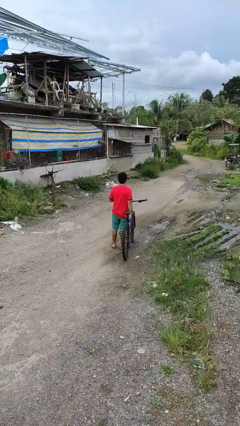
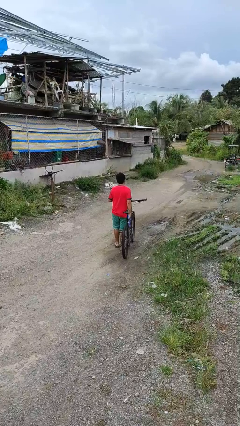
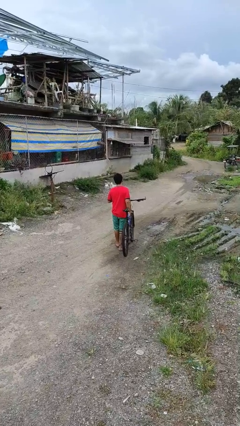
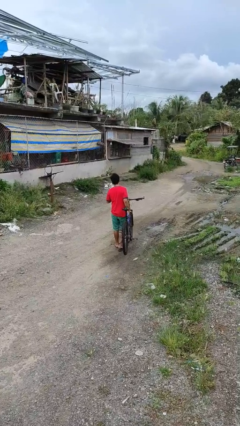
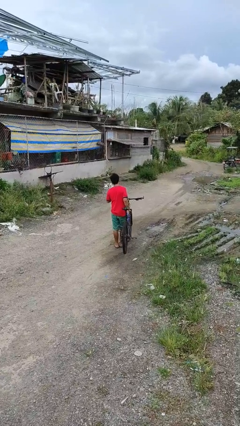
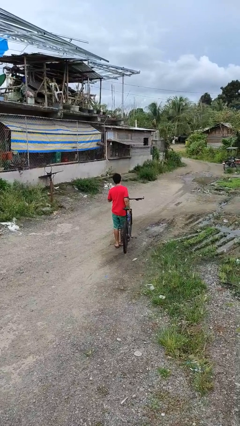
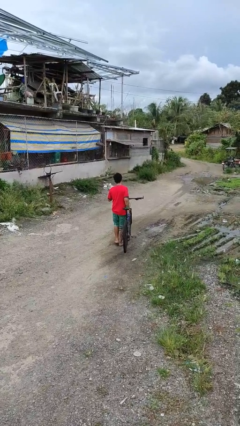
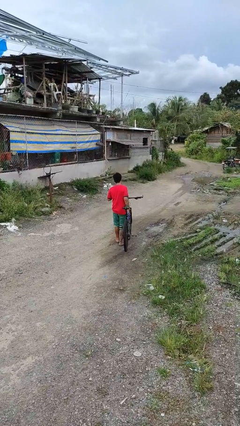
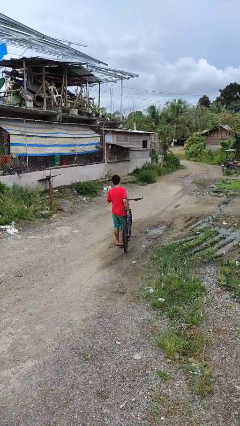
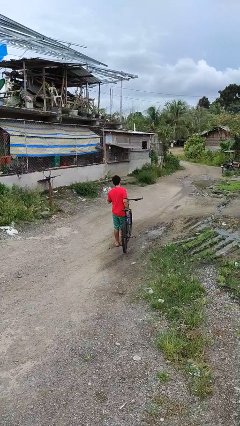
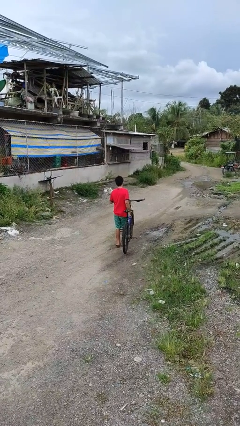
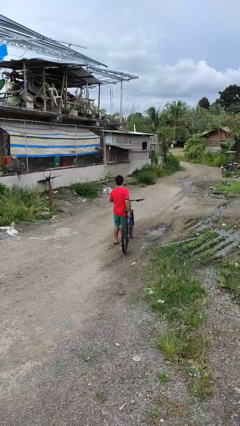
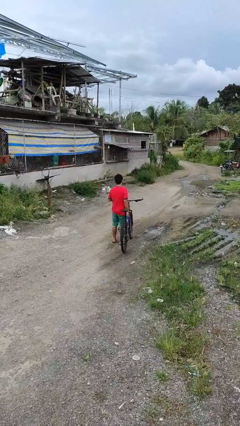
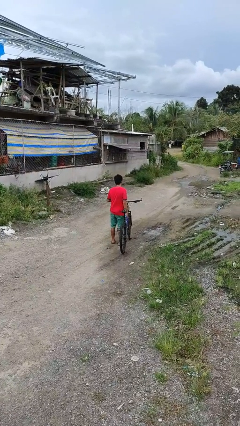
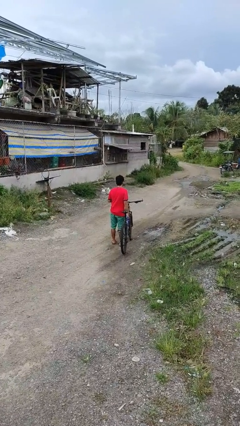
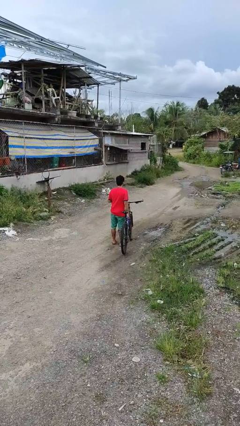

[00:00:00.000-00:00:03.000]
person carries bicycle

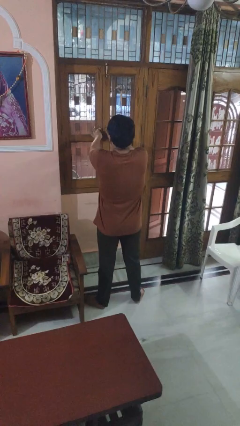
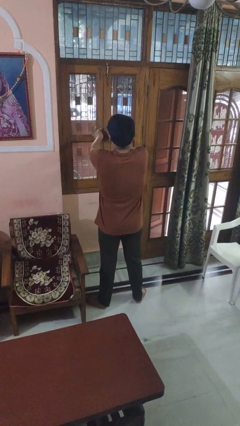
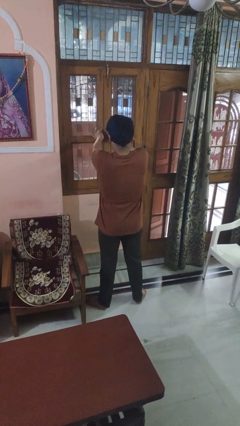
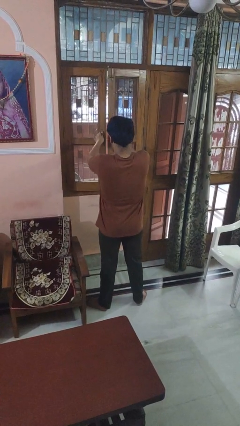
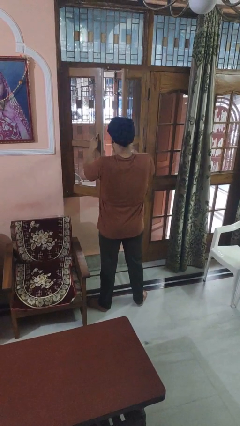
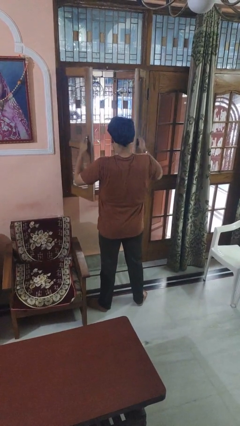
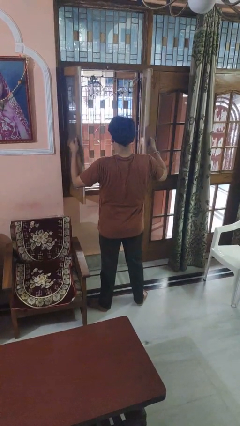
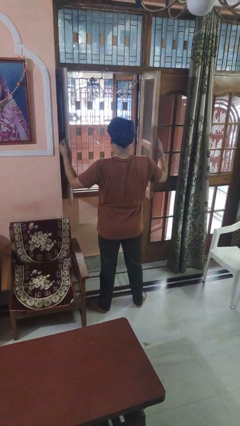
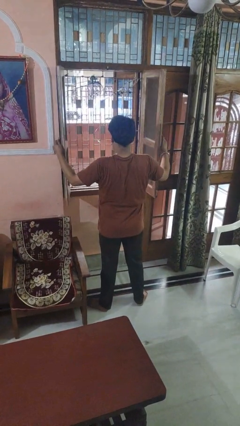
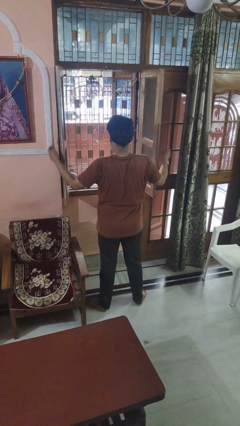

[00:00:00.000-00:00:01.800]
person opens home window

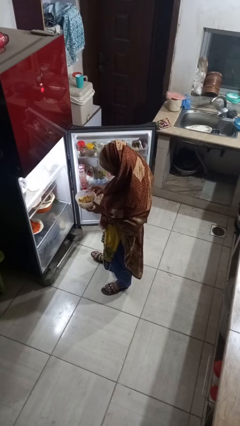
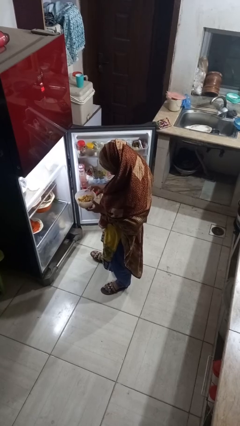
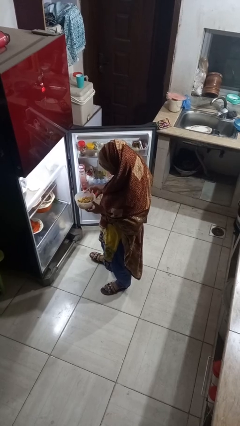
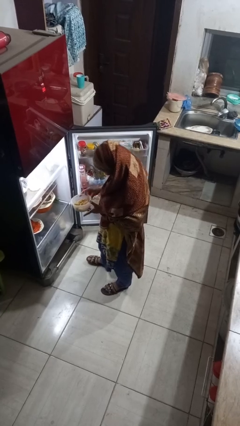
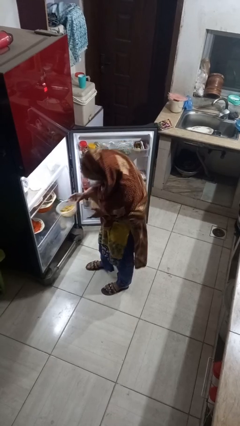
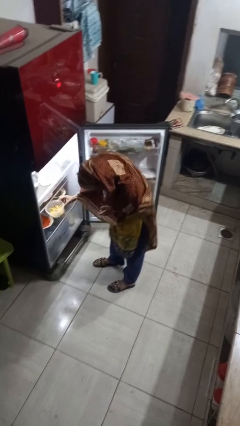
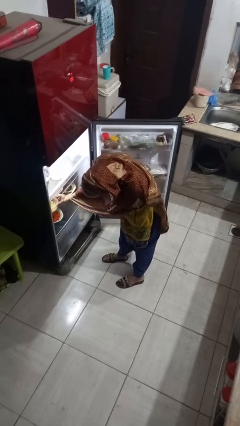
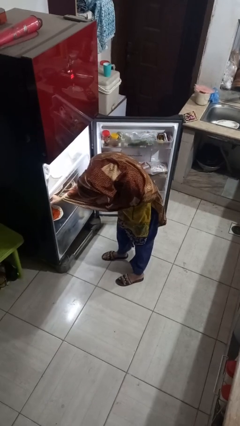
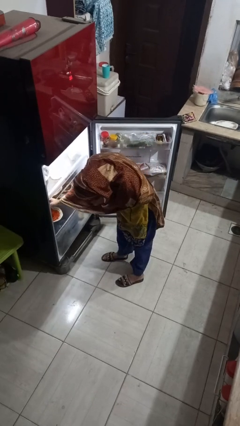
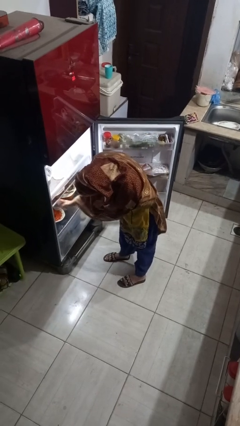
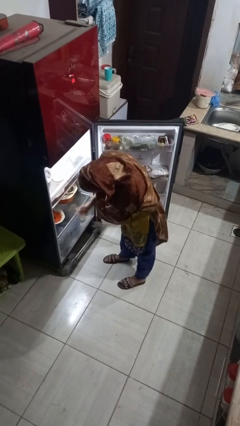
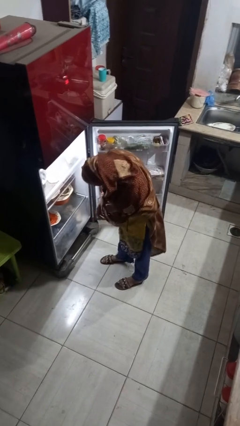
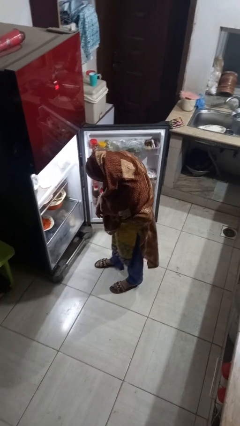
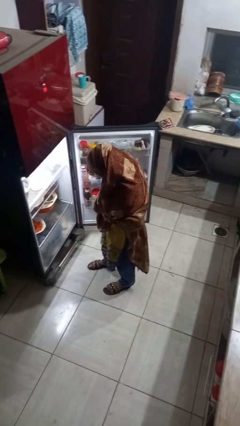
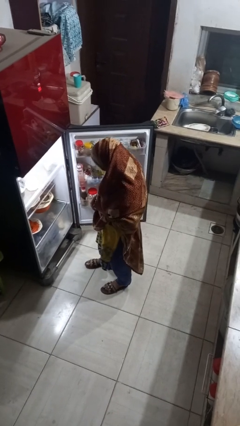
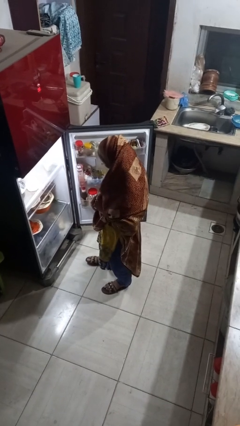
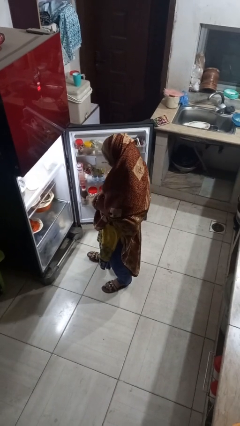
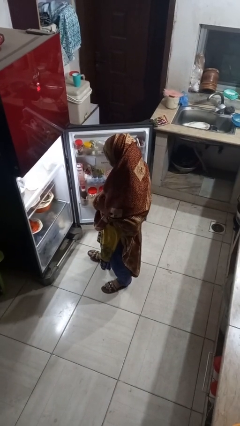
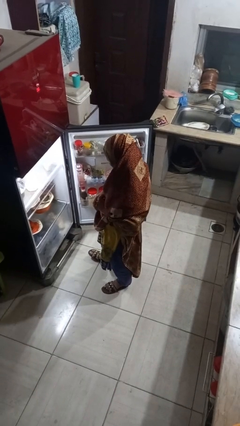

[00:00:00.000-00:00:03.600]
person puts object into refrigerator

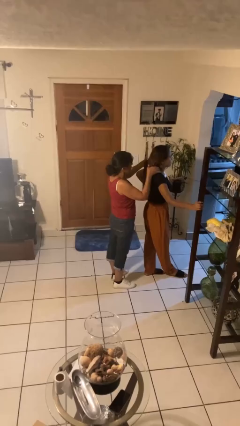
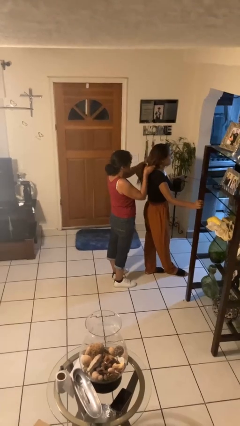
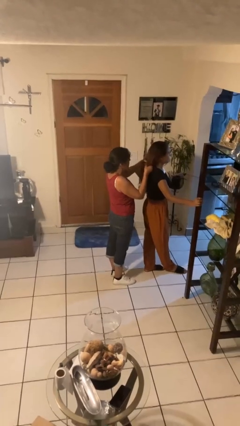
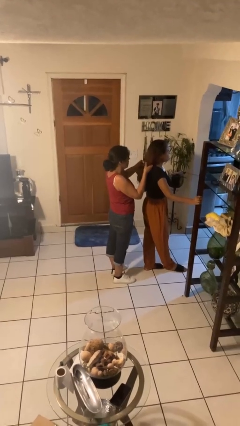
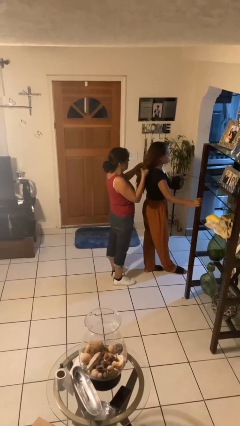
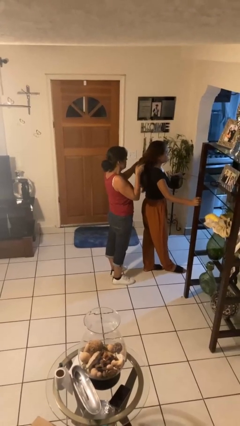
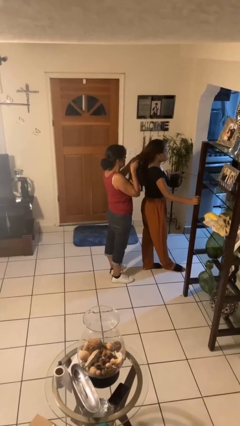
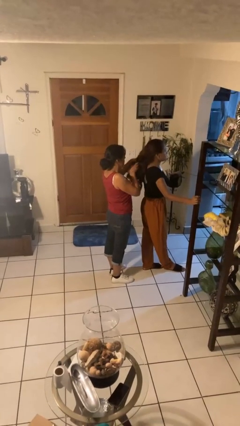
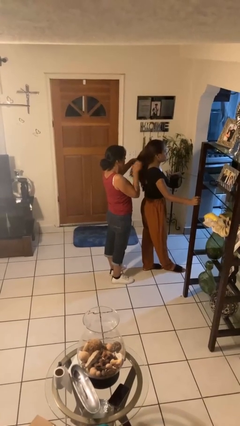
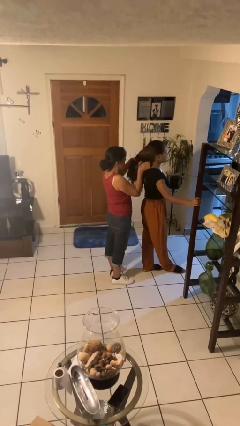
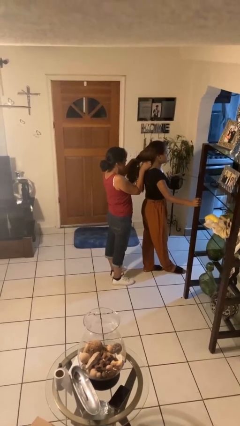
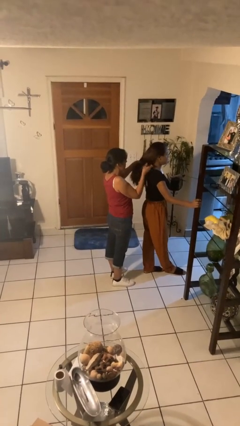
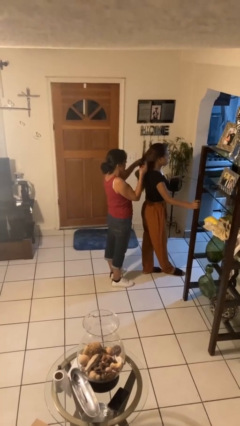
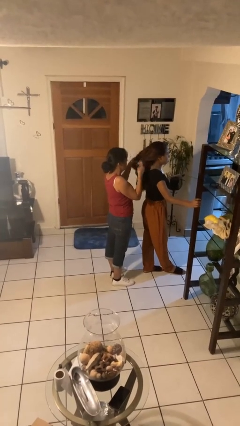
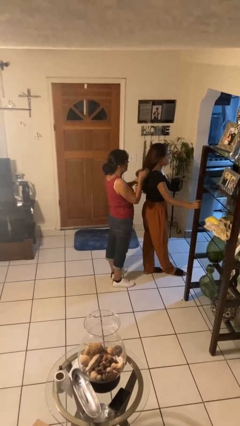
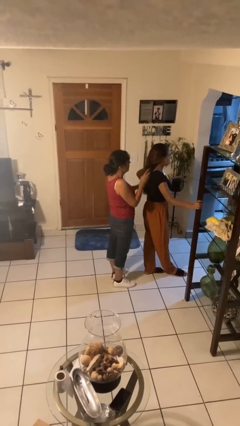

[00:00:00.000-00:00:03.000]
person braids hair of person

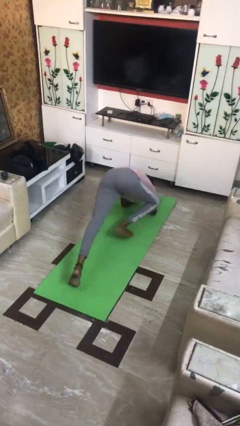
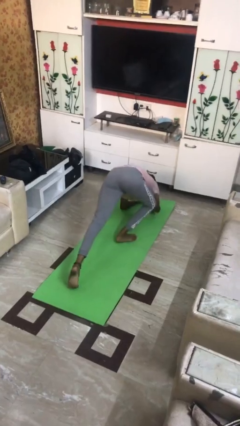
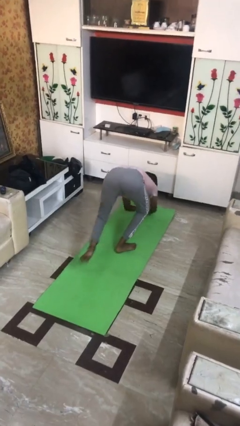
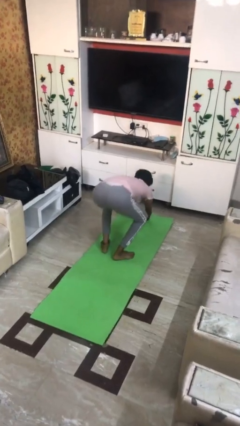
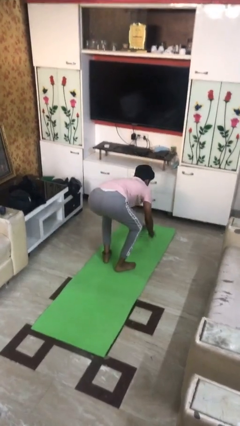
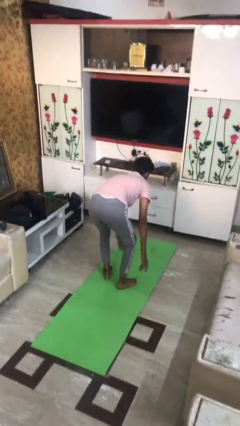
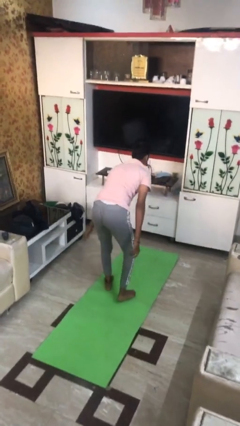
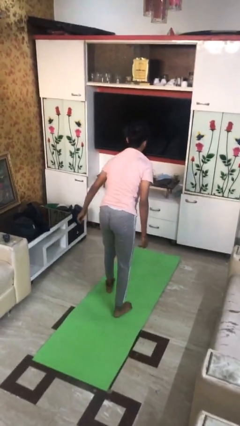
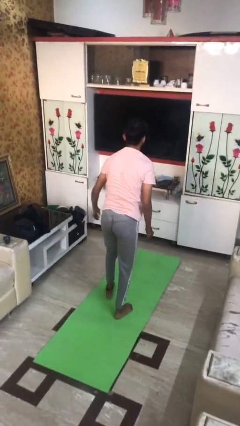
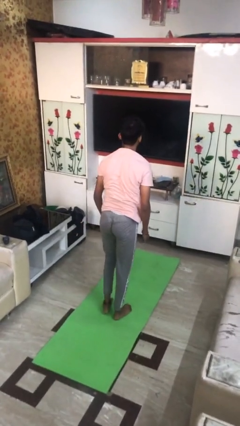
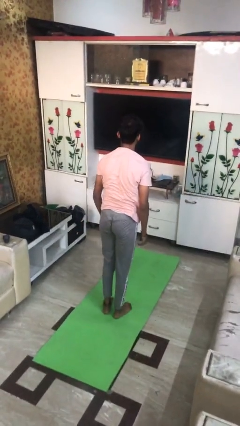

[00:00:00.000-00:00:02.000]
person stands up from floor

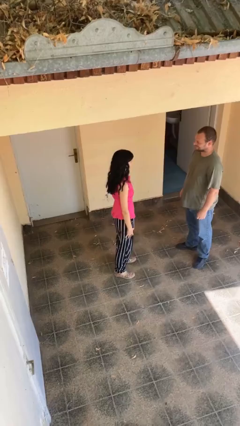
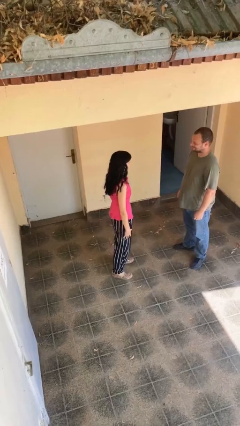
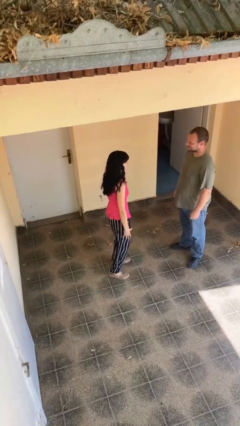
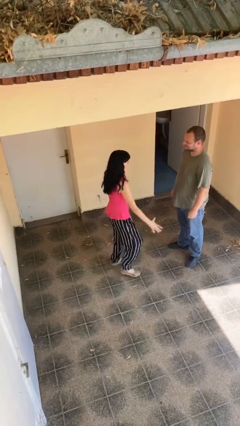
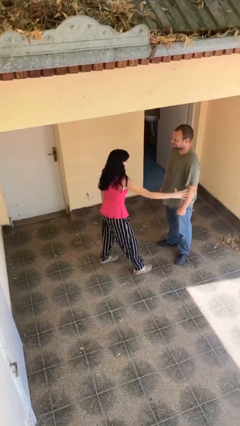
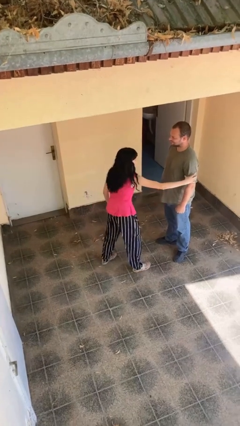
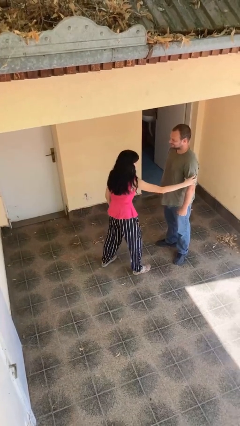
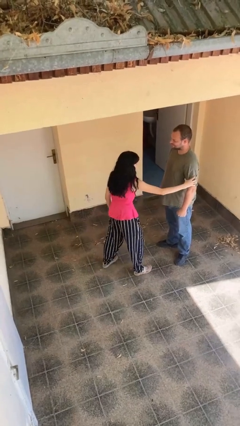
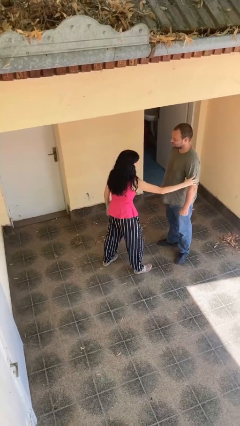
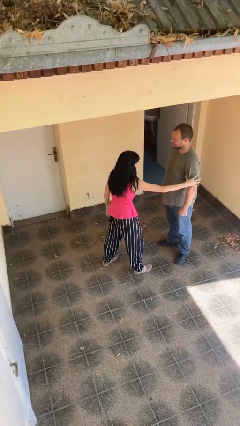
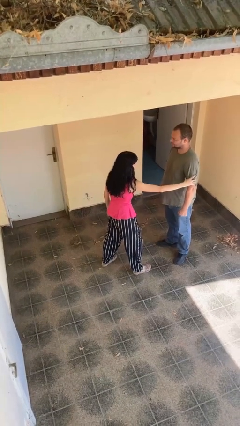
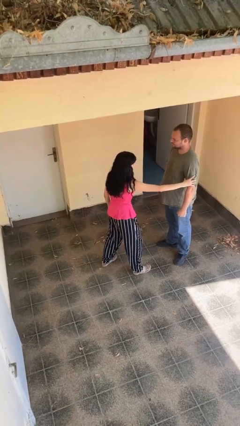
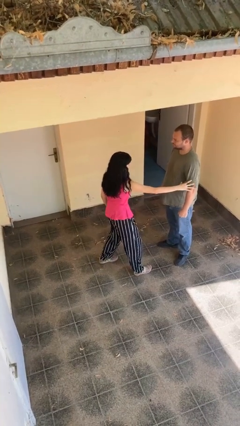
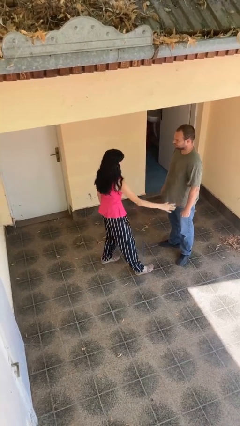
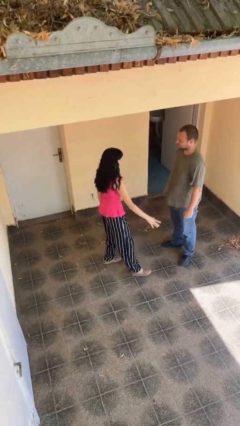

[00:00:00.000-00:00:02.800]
person grabs person by bicep

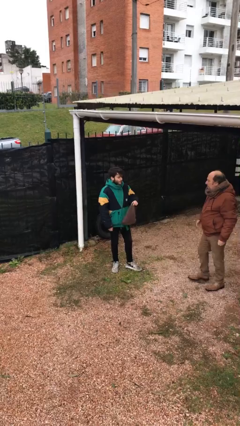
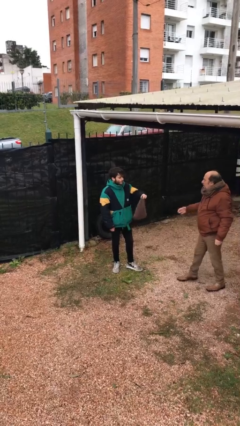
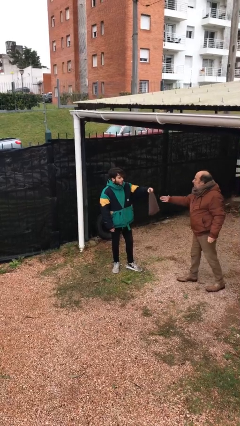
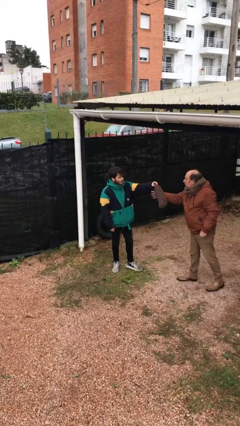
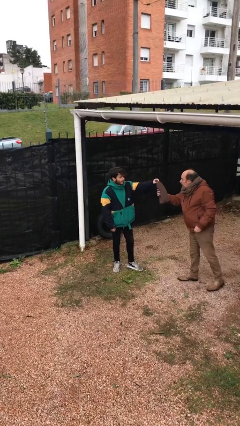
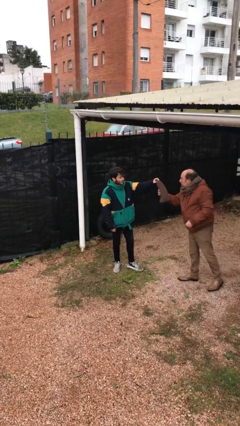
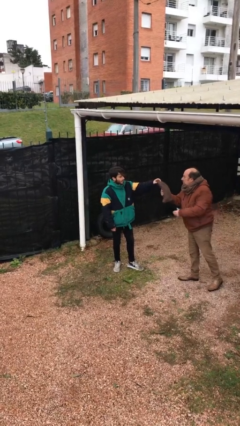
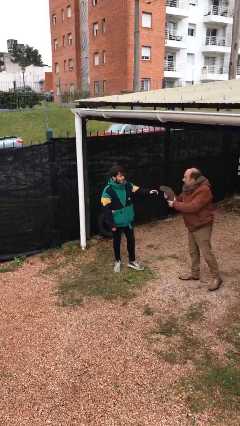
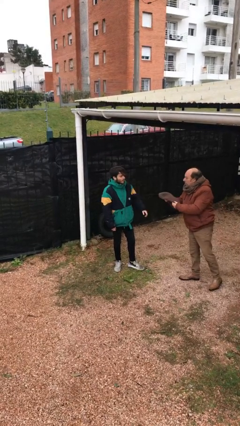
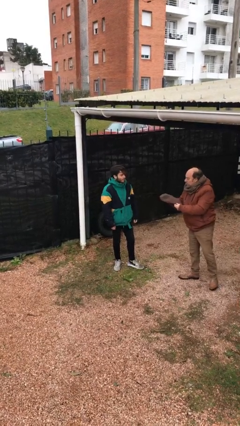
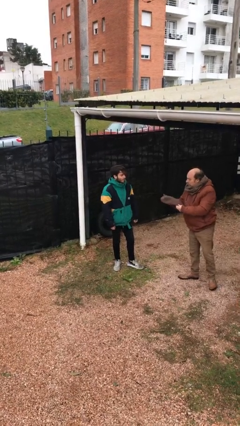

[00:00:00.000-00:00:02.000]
person transfers object to person
